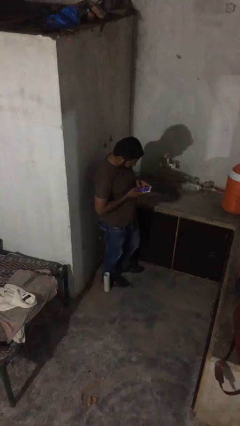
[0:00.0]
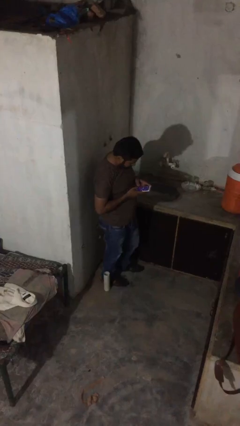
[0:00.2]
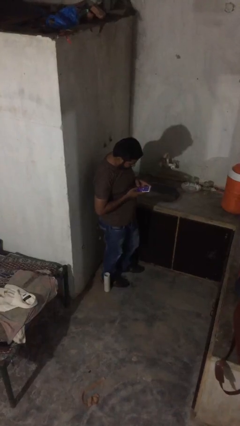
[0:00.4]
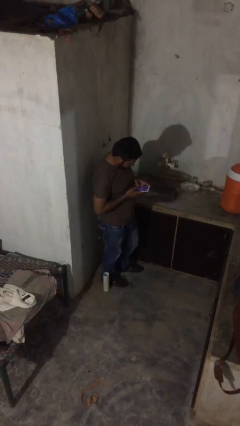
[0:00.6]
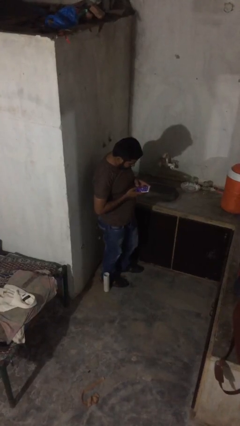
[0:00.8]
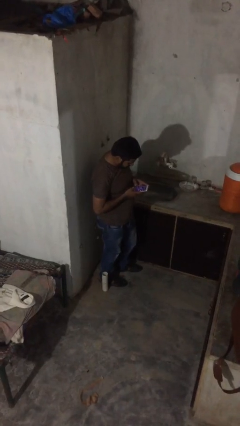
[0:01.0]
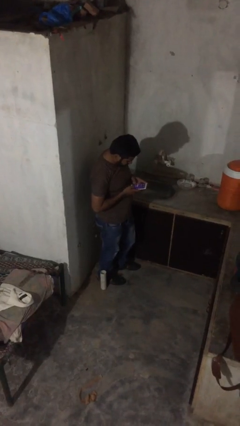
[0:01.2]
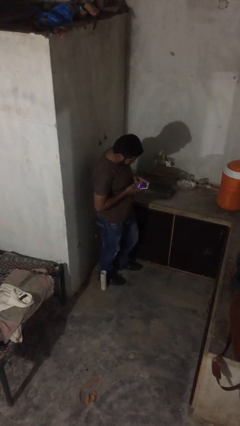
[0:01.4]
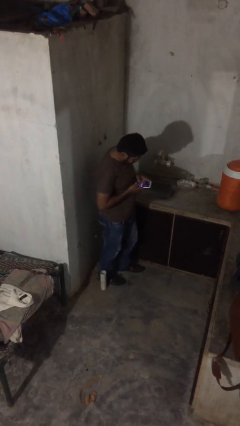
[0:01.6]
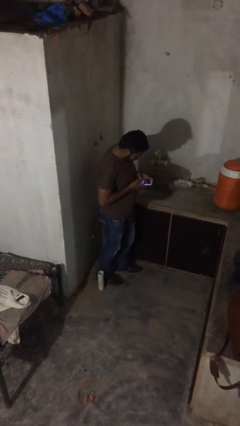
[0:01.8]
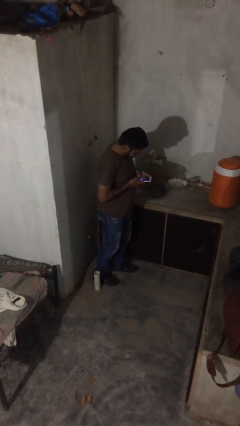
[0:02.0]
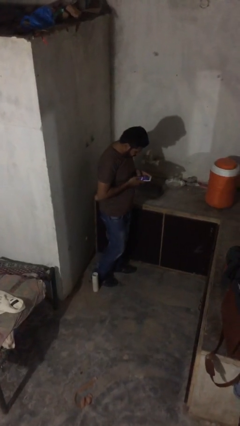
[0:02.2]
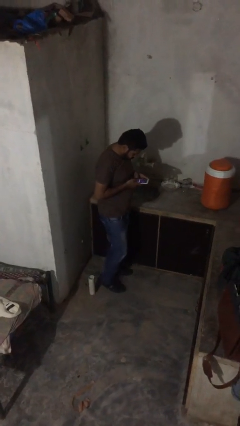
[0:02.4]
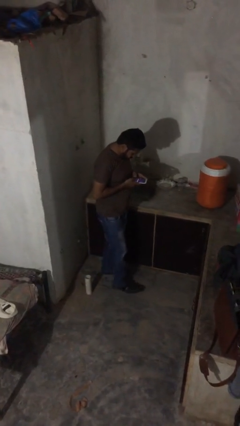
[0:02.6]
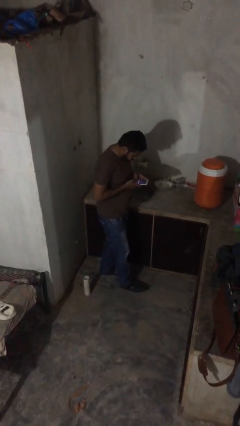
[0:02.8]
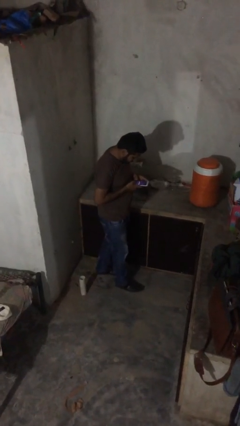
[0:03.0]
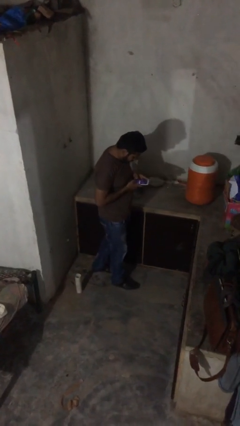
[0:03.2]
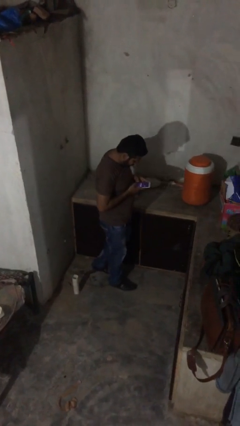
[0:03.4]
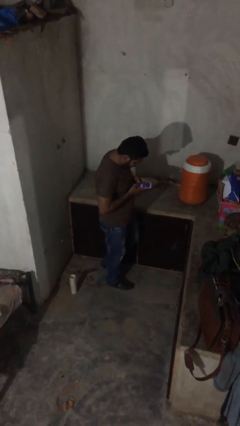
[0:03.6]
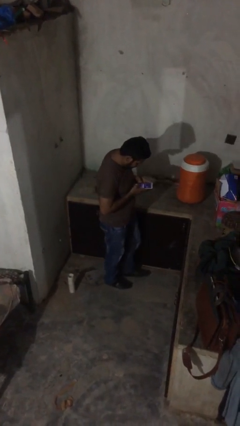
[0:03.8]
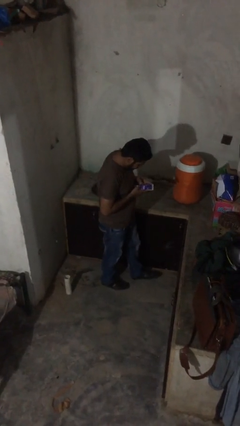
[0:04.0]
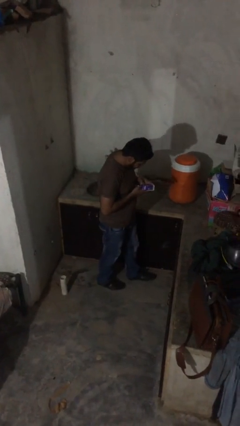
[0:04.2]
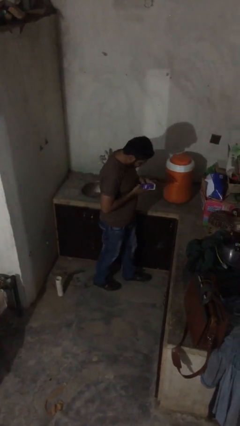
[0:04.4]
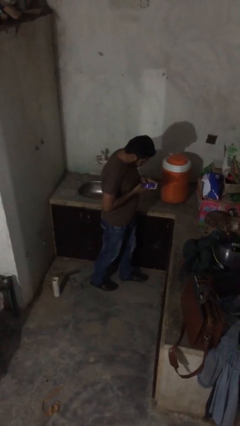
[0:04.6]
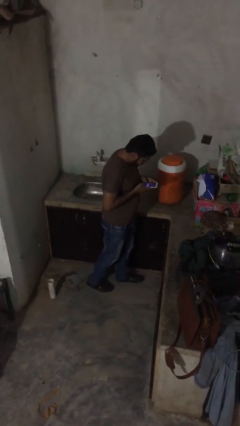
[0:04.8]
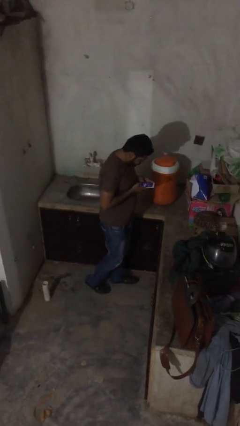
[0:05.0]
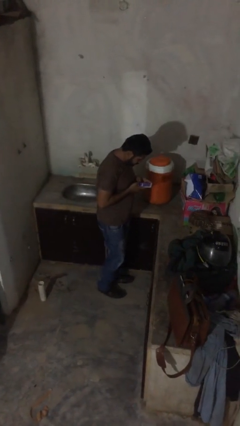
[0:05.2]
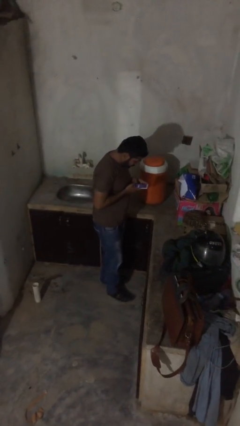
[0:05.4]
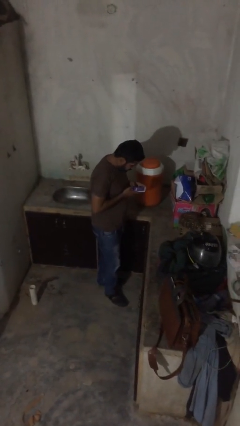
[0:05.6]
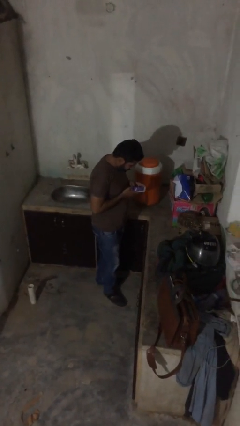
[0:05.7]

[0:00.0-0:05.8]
person texts on phone

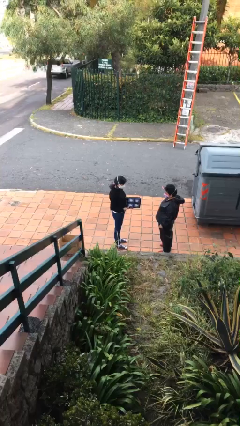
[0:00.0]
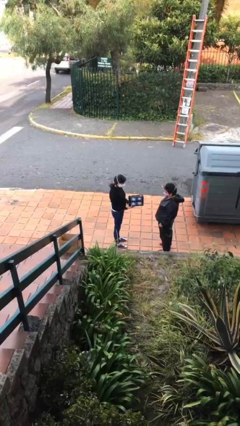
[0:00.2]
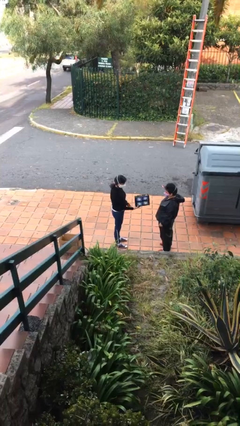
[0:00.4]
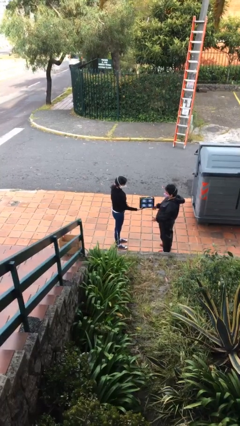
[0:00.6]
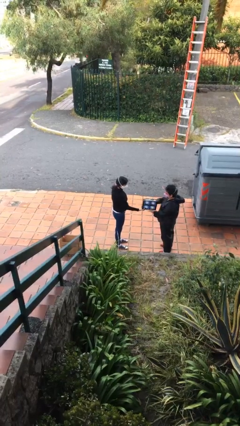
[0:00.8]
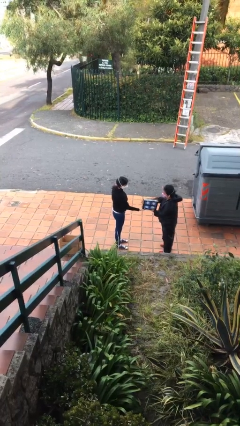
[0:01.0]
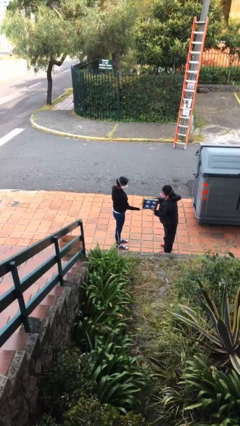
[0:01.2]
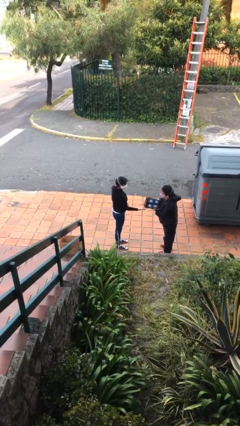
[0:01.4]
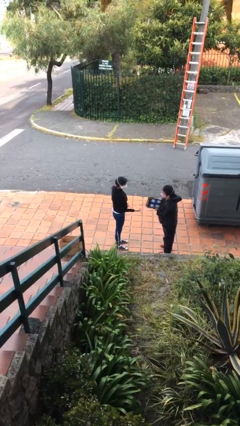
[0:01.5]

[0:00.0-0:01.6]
person transfers object to person

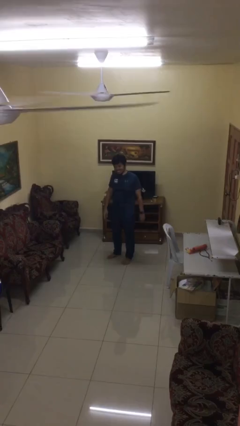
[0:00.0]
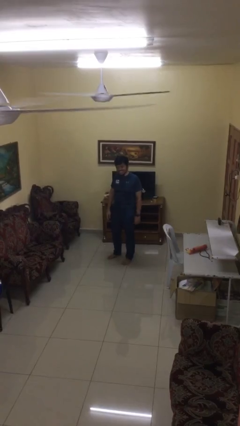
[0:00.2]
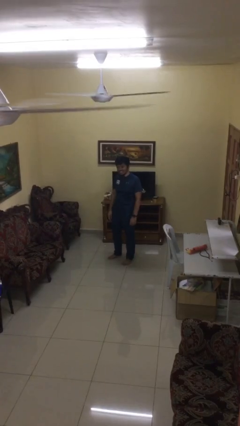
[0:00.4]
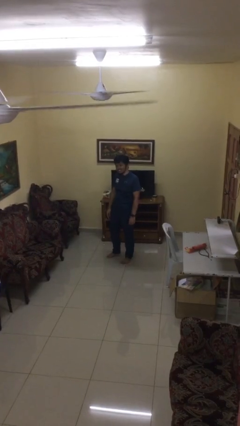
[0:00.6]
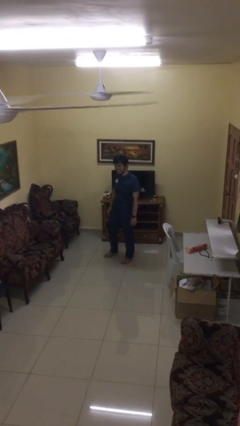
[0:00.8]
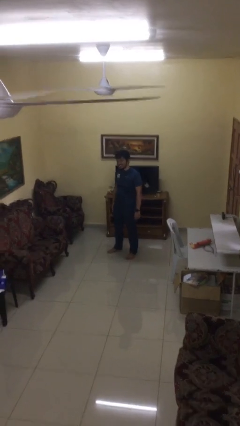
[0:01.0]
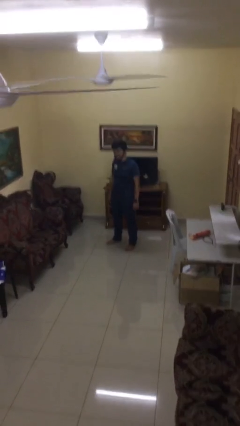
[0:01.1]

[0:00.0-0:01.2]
person gestures raise hand

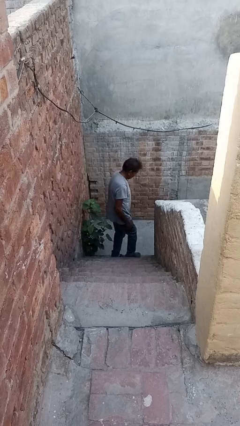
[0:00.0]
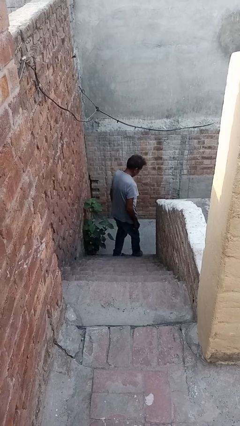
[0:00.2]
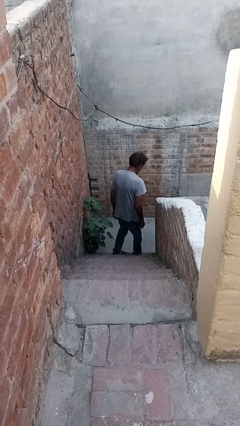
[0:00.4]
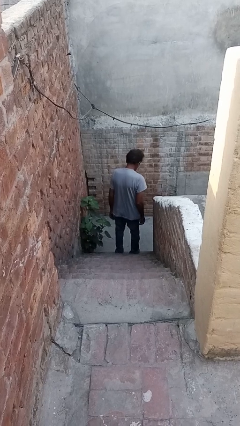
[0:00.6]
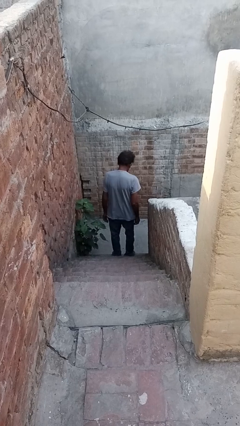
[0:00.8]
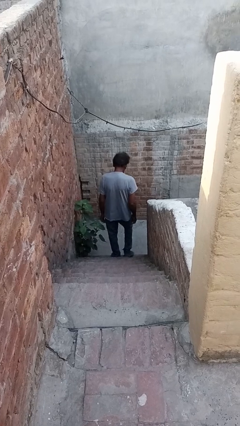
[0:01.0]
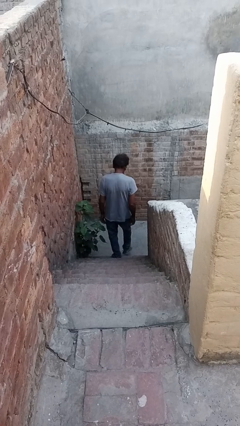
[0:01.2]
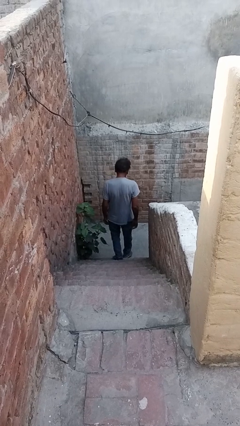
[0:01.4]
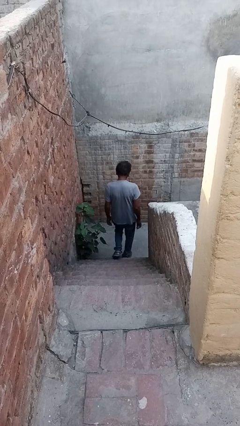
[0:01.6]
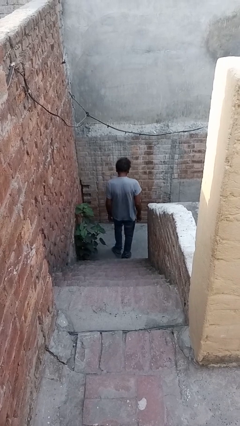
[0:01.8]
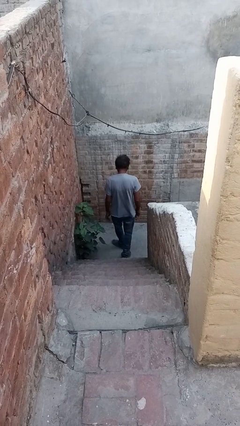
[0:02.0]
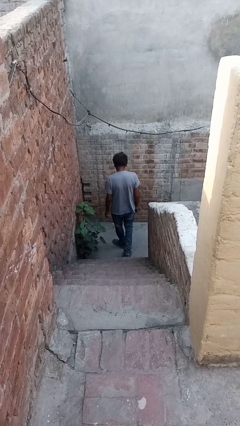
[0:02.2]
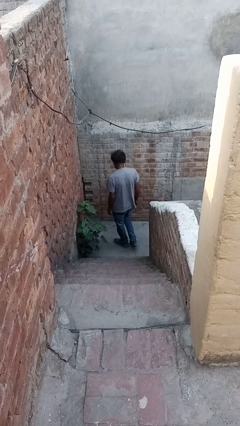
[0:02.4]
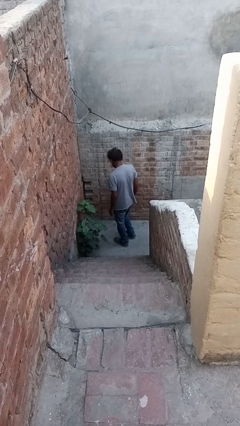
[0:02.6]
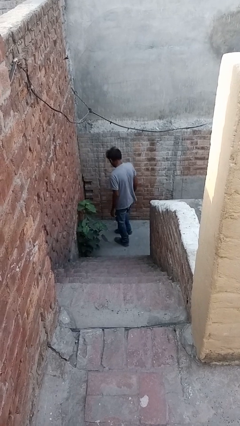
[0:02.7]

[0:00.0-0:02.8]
person climbs down stairs

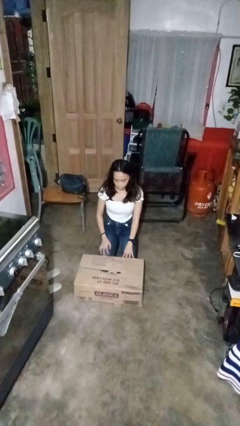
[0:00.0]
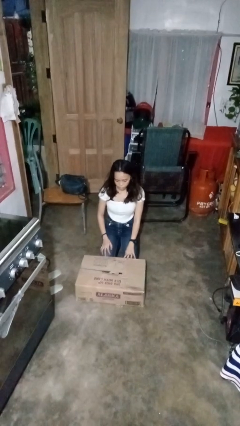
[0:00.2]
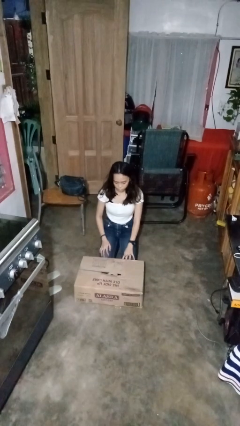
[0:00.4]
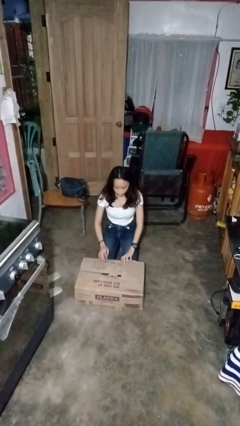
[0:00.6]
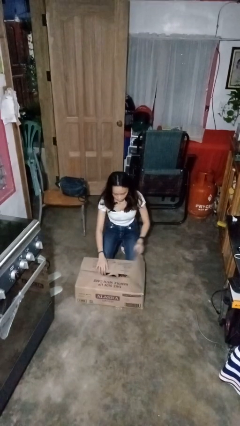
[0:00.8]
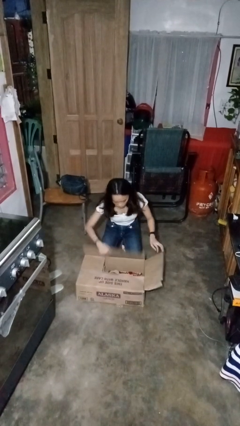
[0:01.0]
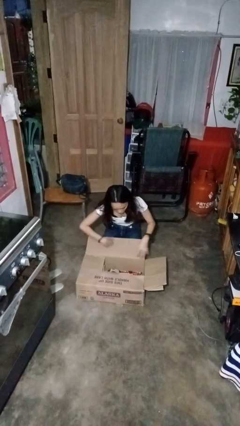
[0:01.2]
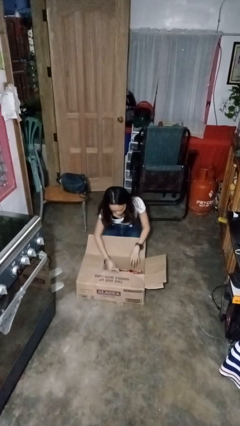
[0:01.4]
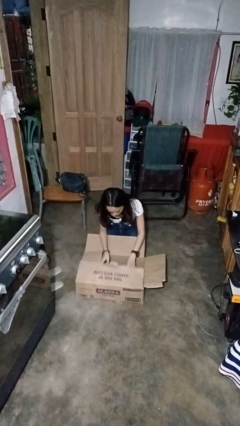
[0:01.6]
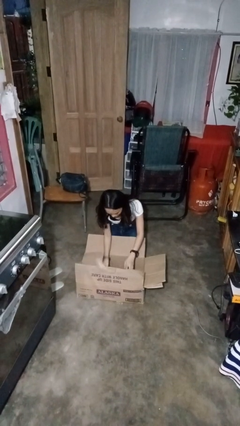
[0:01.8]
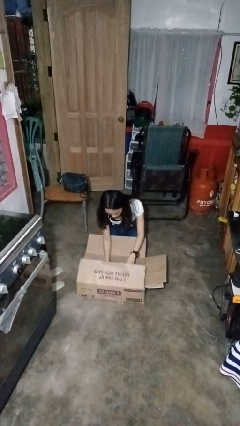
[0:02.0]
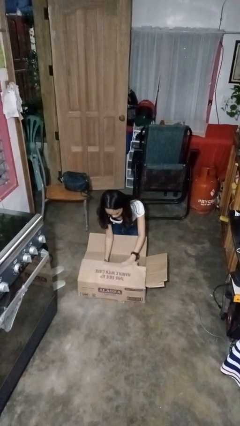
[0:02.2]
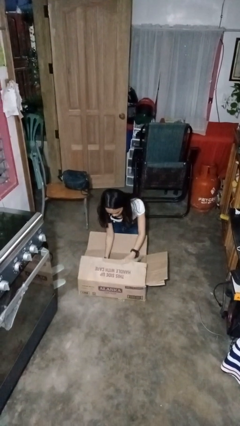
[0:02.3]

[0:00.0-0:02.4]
person searches in box

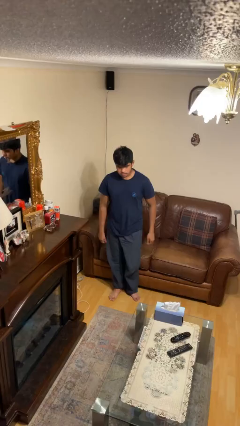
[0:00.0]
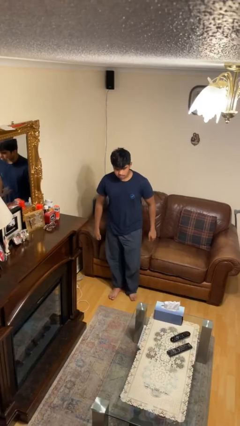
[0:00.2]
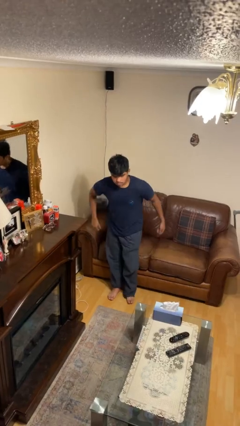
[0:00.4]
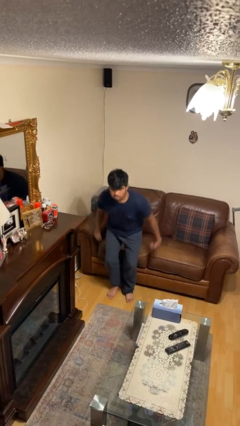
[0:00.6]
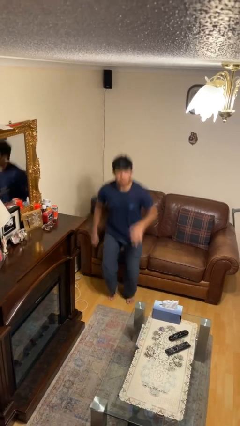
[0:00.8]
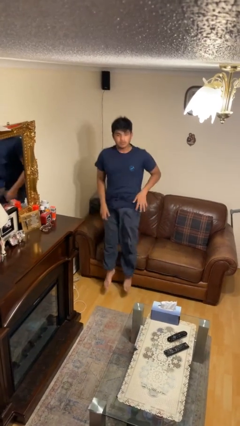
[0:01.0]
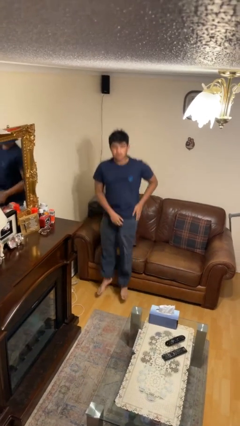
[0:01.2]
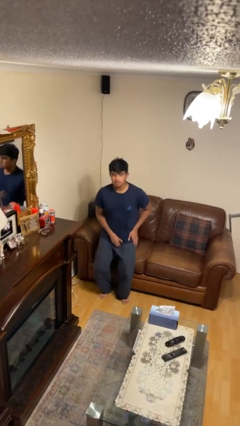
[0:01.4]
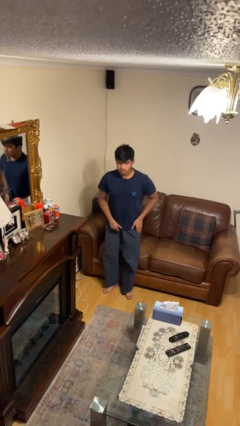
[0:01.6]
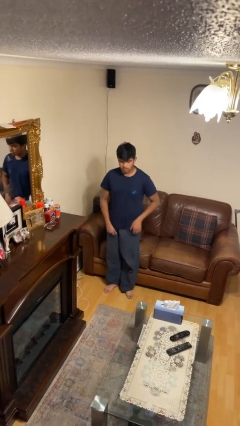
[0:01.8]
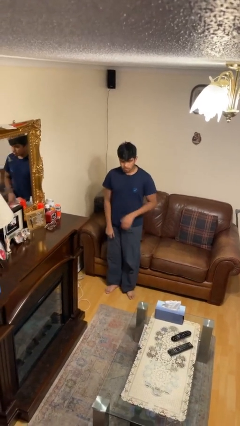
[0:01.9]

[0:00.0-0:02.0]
person jumps

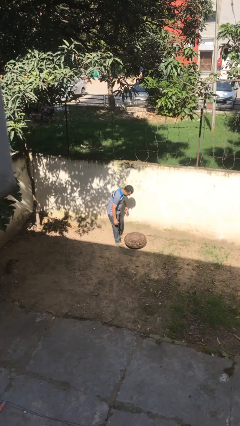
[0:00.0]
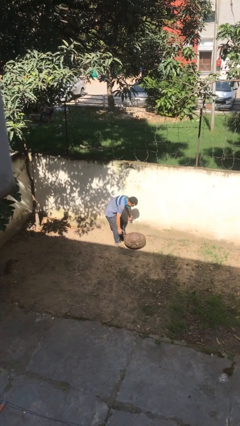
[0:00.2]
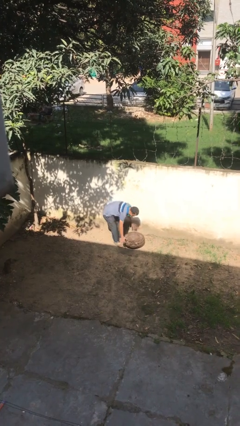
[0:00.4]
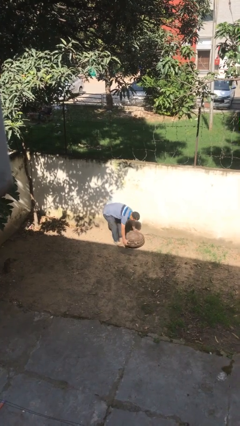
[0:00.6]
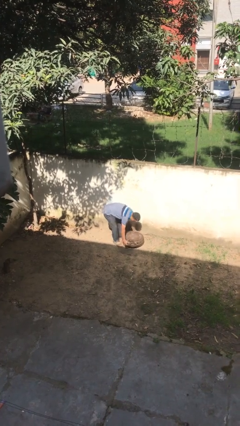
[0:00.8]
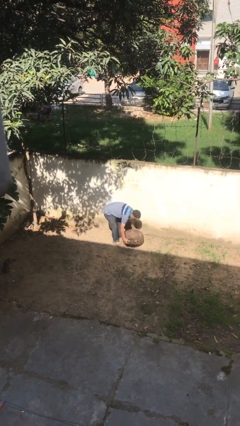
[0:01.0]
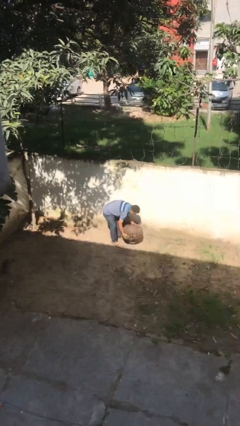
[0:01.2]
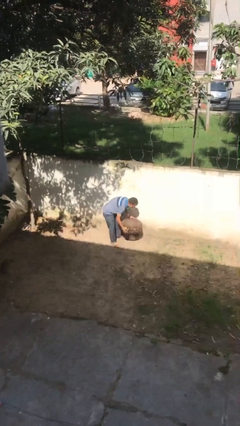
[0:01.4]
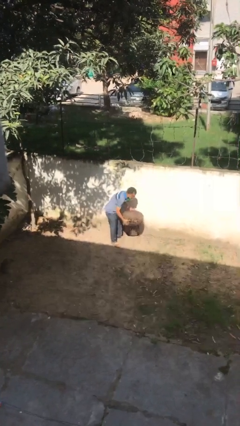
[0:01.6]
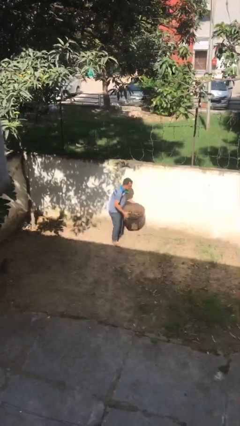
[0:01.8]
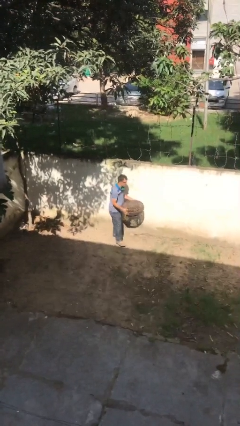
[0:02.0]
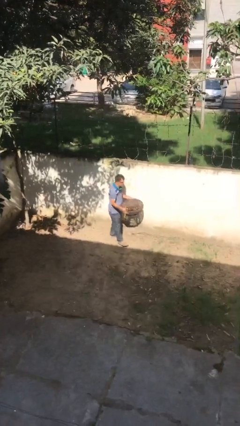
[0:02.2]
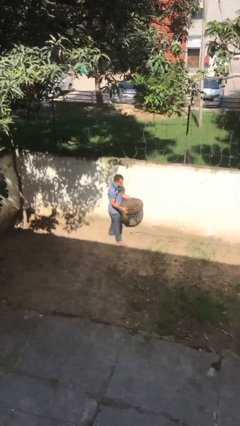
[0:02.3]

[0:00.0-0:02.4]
person picks up object from floor
